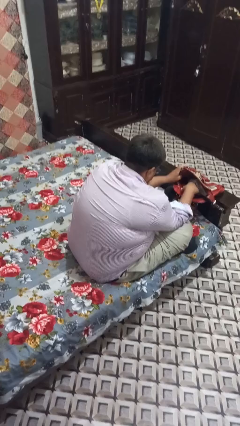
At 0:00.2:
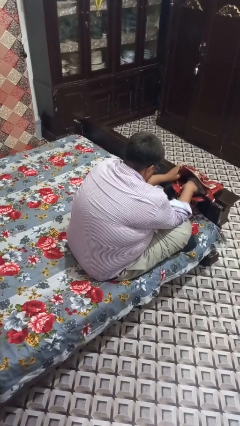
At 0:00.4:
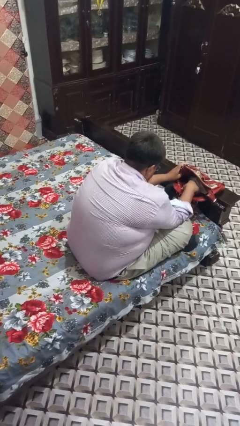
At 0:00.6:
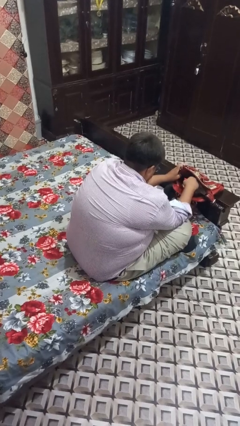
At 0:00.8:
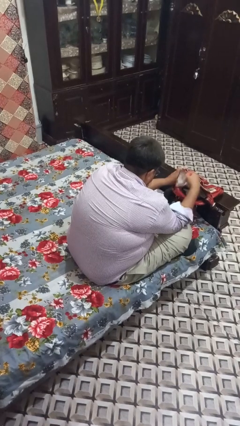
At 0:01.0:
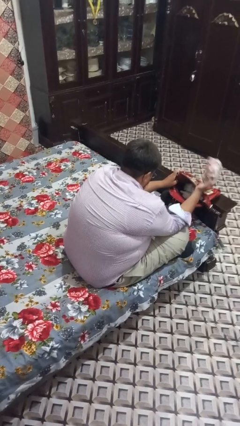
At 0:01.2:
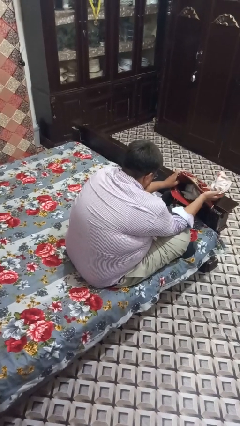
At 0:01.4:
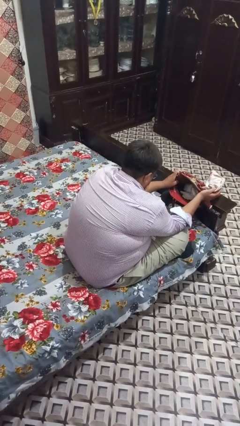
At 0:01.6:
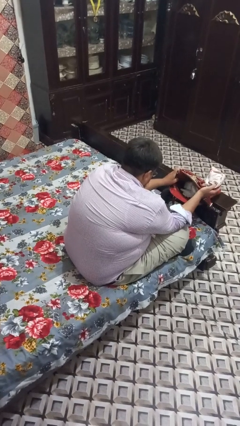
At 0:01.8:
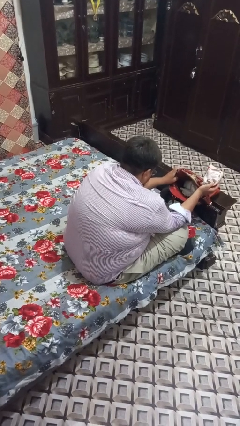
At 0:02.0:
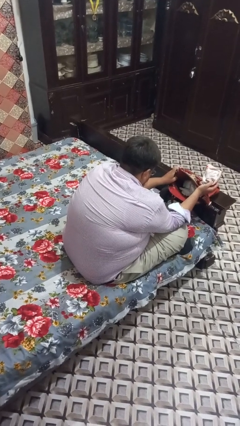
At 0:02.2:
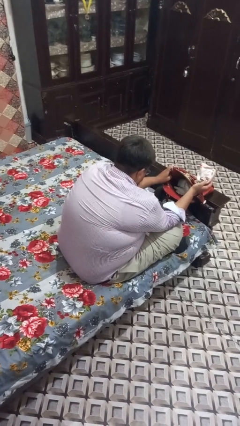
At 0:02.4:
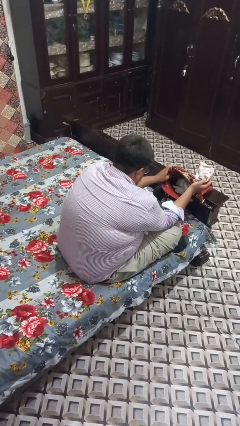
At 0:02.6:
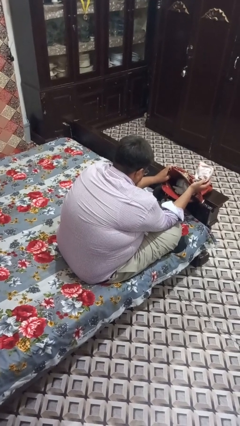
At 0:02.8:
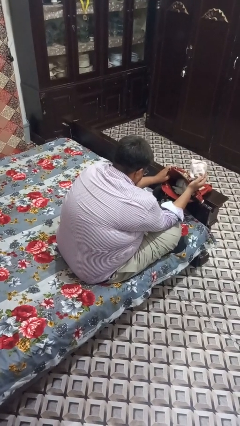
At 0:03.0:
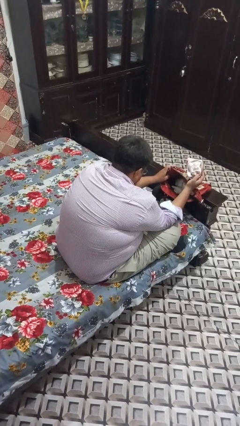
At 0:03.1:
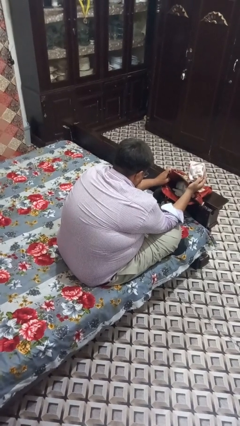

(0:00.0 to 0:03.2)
person takes object from purse

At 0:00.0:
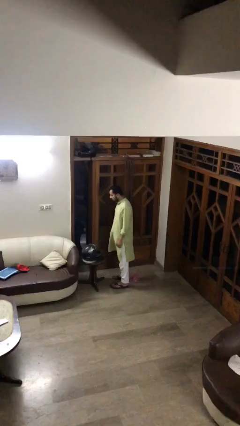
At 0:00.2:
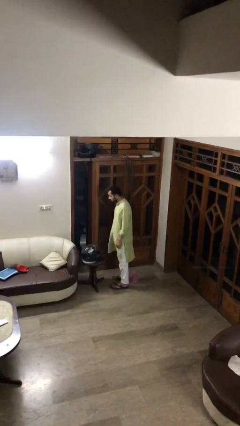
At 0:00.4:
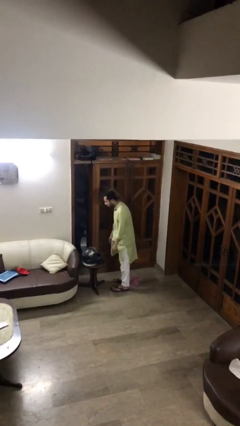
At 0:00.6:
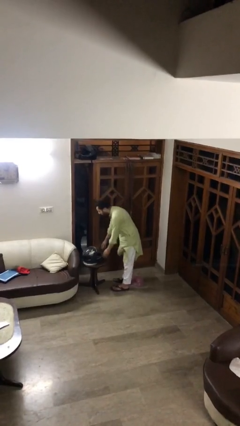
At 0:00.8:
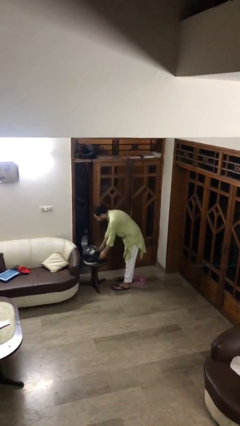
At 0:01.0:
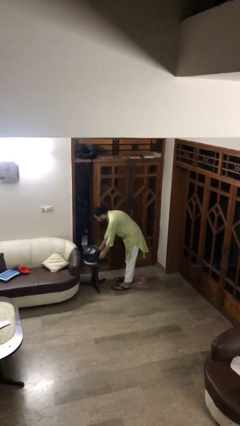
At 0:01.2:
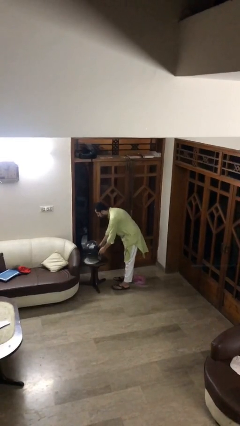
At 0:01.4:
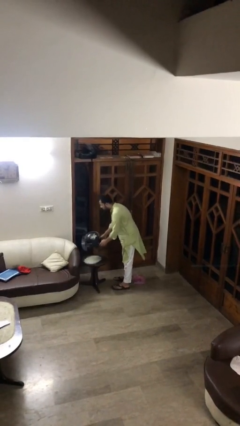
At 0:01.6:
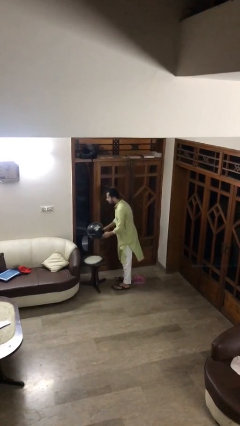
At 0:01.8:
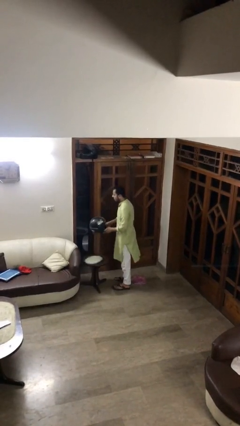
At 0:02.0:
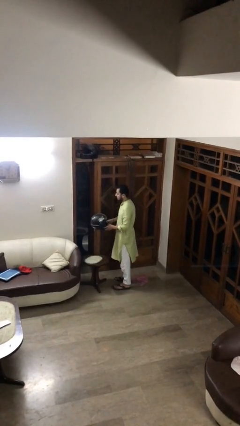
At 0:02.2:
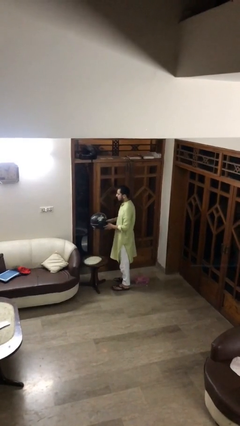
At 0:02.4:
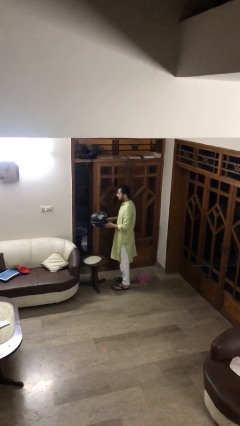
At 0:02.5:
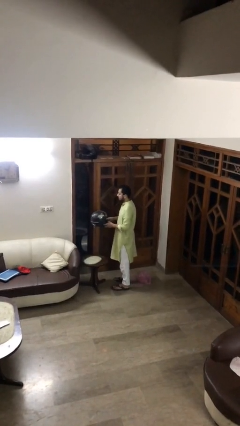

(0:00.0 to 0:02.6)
person picks up object from table

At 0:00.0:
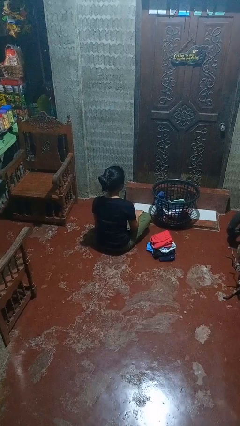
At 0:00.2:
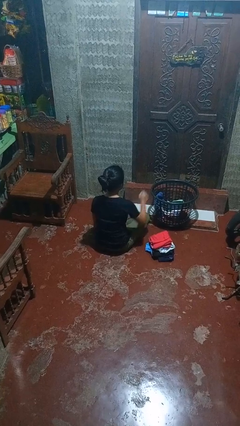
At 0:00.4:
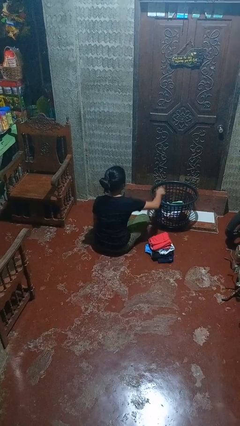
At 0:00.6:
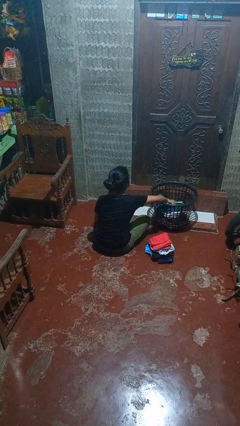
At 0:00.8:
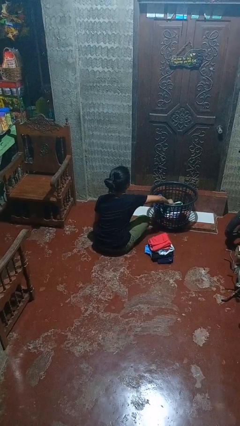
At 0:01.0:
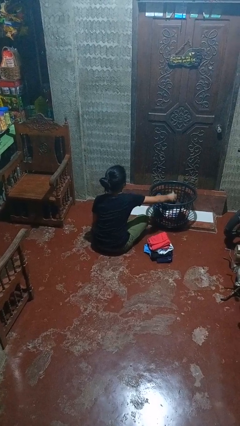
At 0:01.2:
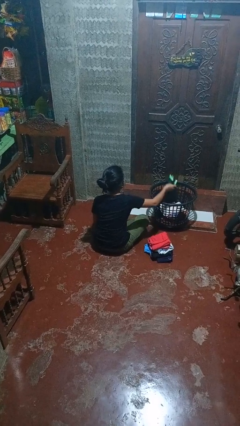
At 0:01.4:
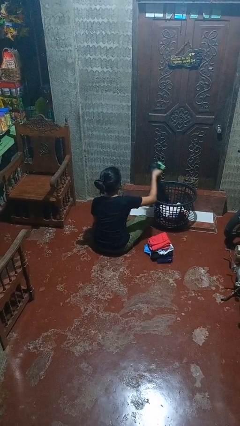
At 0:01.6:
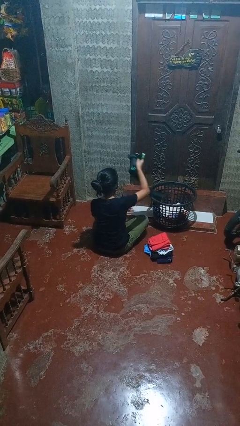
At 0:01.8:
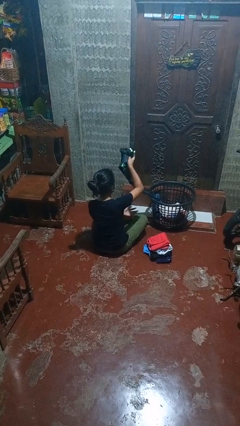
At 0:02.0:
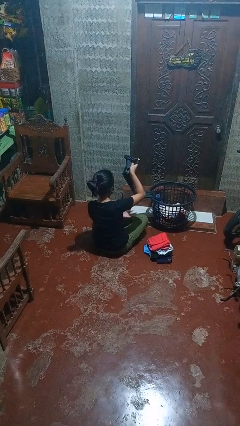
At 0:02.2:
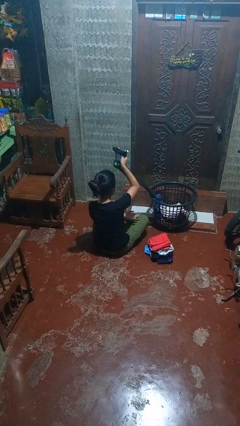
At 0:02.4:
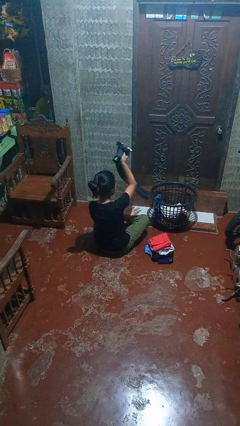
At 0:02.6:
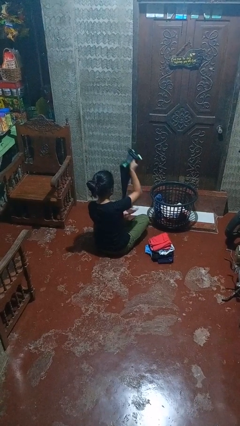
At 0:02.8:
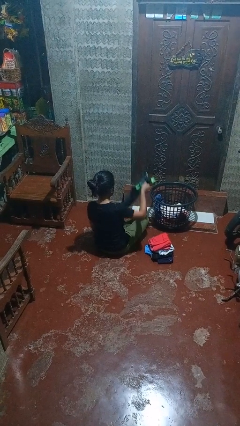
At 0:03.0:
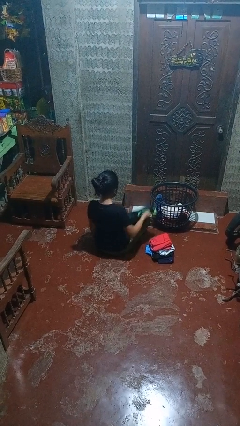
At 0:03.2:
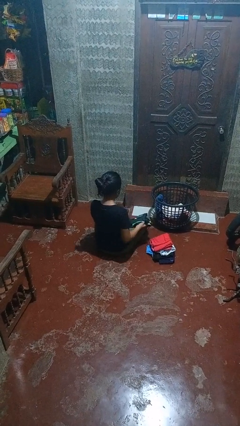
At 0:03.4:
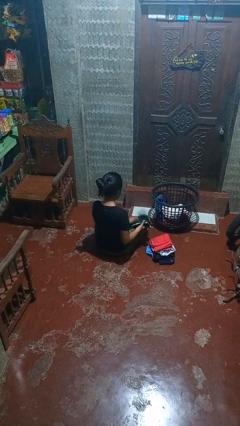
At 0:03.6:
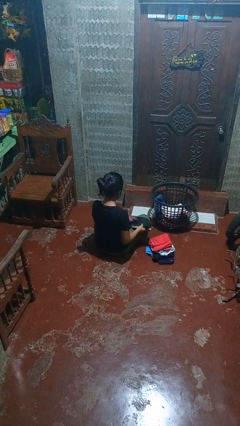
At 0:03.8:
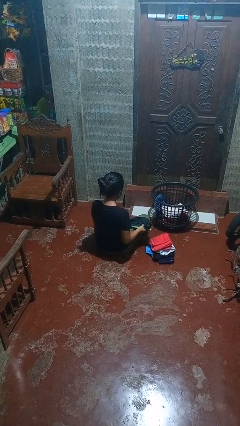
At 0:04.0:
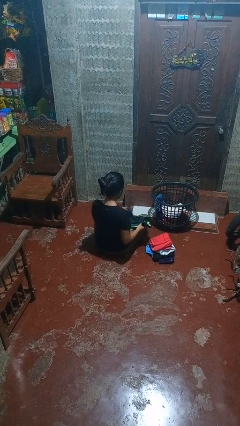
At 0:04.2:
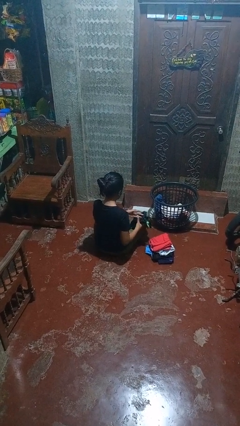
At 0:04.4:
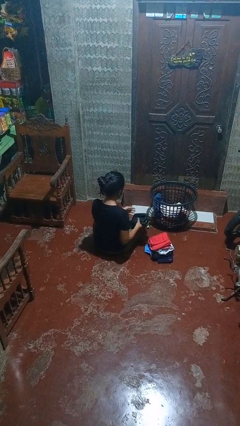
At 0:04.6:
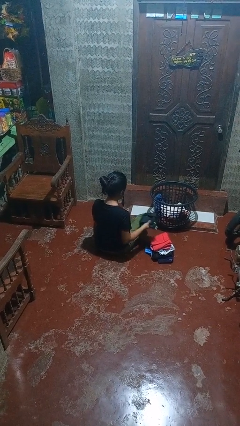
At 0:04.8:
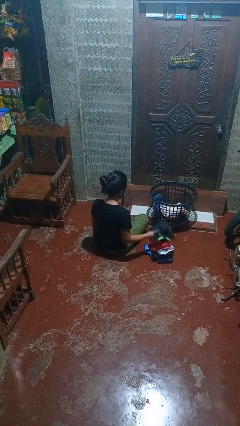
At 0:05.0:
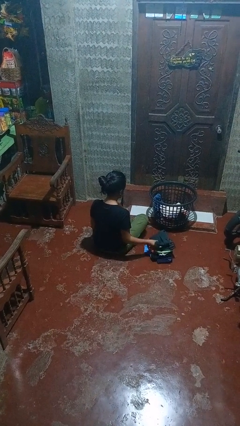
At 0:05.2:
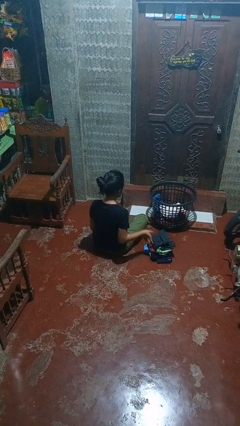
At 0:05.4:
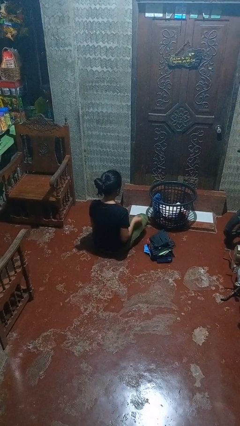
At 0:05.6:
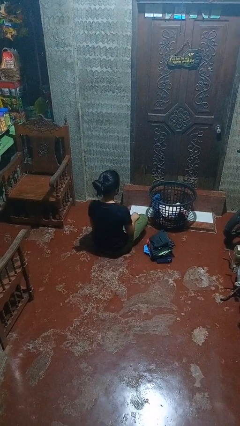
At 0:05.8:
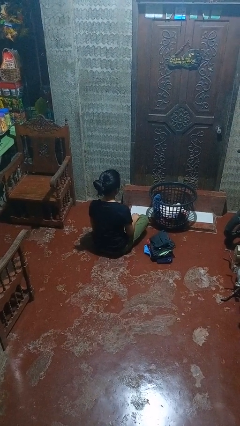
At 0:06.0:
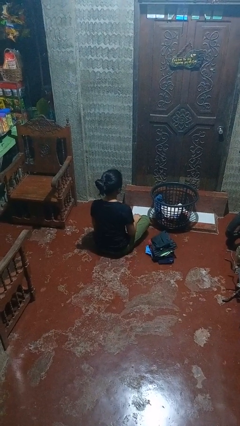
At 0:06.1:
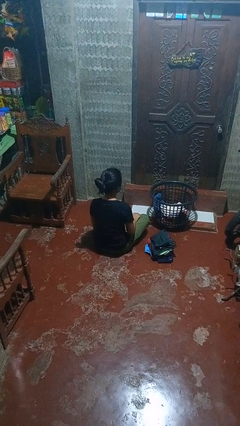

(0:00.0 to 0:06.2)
person folds shirt

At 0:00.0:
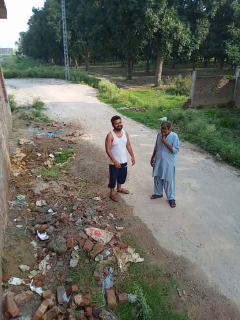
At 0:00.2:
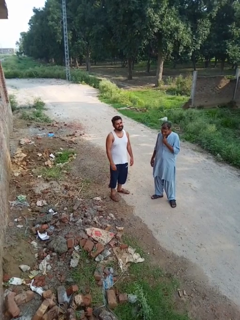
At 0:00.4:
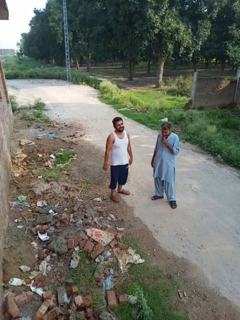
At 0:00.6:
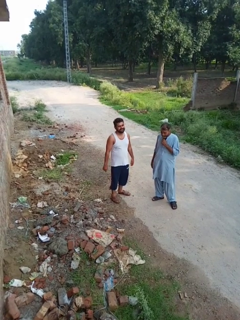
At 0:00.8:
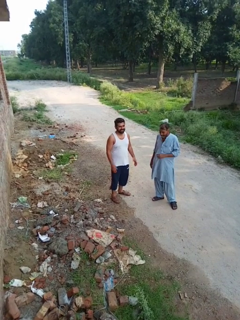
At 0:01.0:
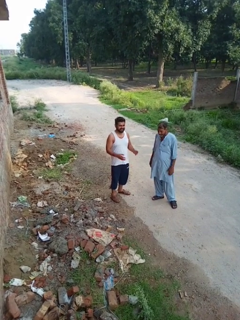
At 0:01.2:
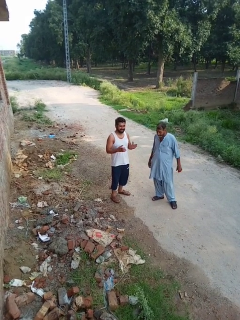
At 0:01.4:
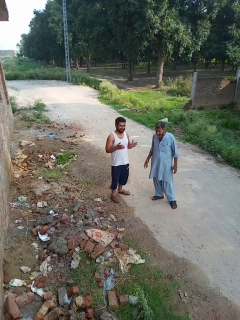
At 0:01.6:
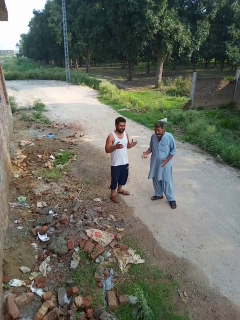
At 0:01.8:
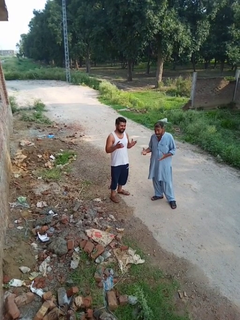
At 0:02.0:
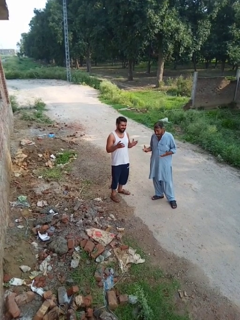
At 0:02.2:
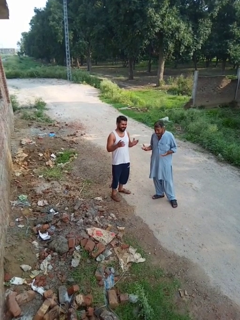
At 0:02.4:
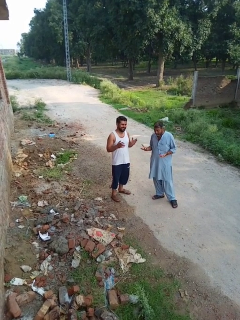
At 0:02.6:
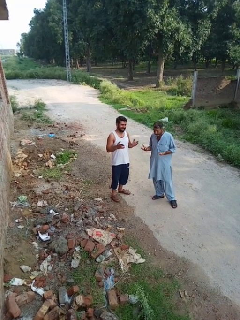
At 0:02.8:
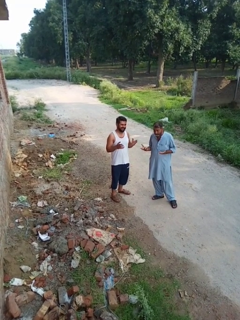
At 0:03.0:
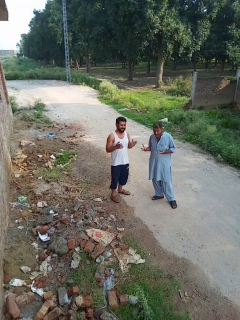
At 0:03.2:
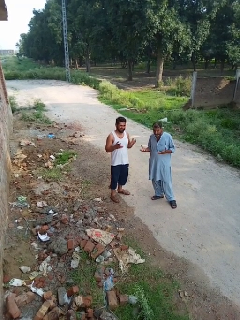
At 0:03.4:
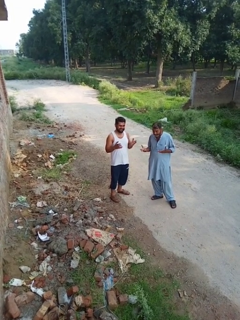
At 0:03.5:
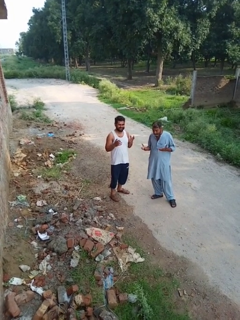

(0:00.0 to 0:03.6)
person laughs with person

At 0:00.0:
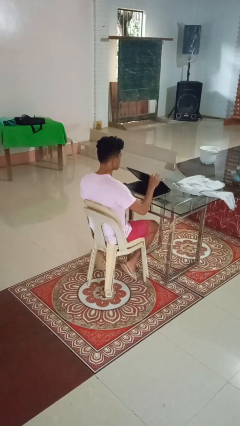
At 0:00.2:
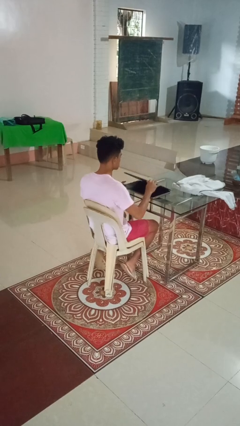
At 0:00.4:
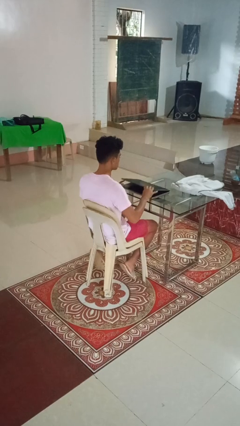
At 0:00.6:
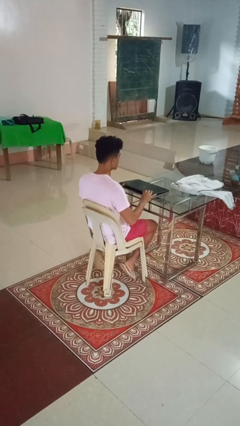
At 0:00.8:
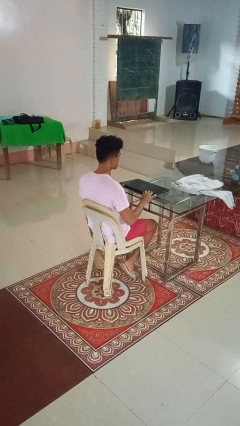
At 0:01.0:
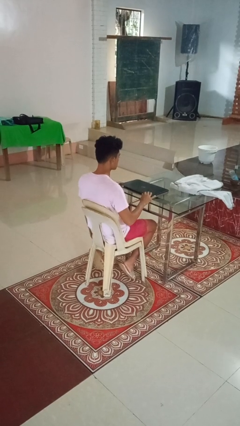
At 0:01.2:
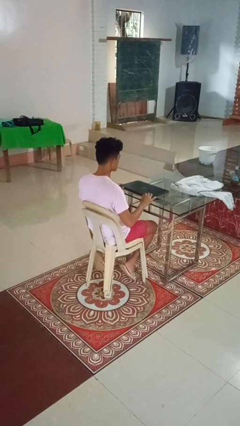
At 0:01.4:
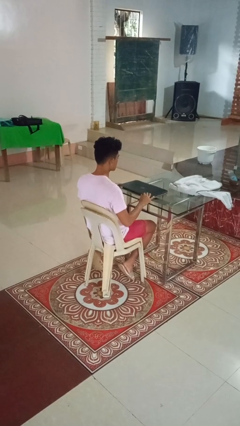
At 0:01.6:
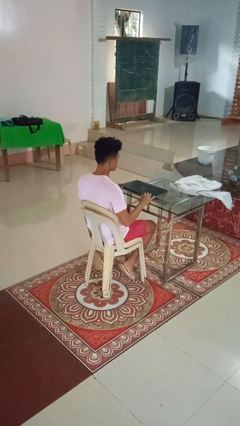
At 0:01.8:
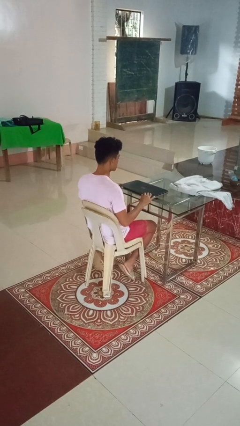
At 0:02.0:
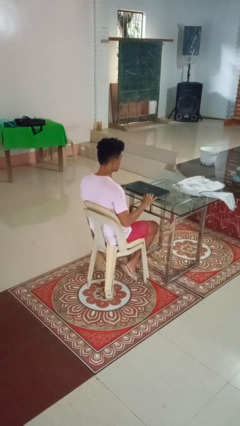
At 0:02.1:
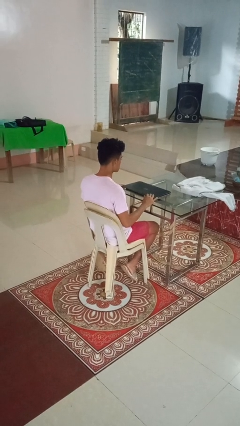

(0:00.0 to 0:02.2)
person closes laptop

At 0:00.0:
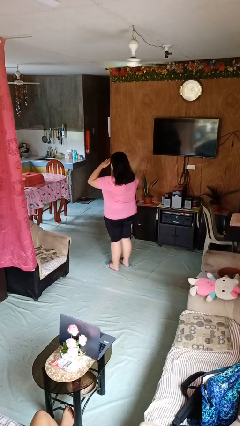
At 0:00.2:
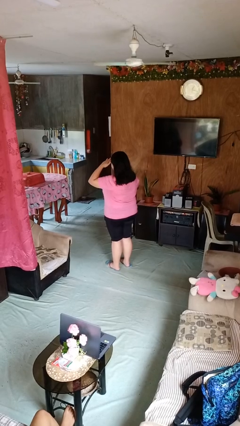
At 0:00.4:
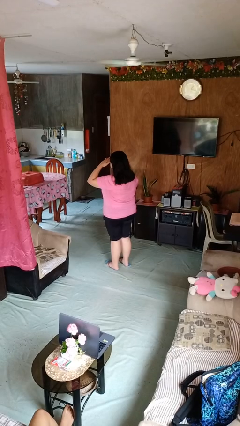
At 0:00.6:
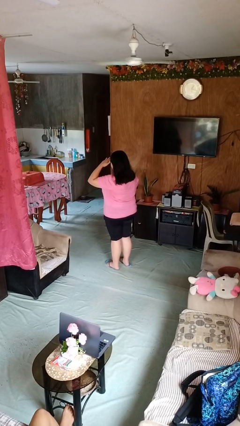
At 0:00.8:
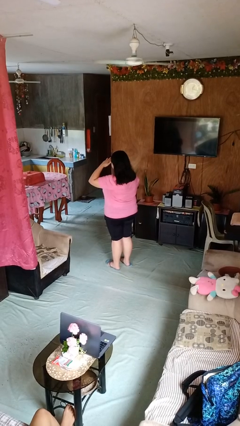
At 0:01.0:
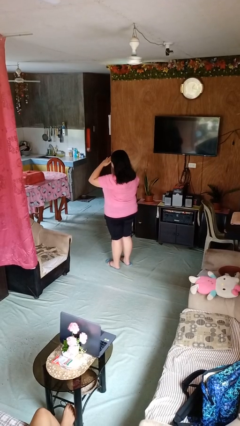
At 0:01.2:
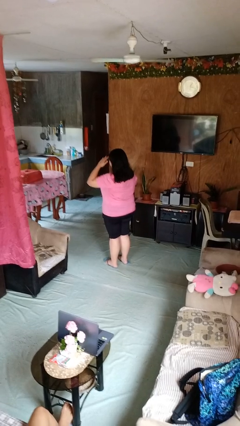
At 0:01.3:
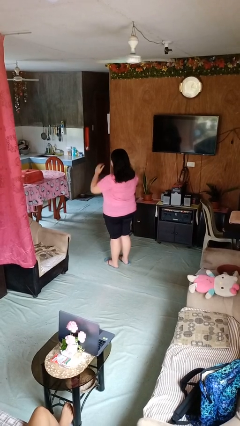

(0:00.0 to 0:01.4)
person salutes
